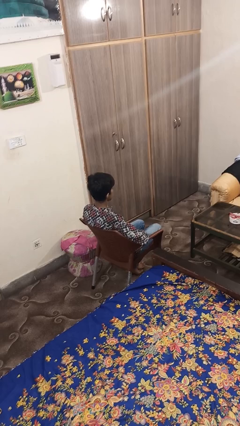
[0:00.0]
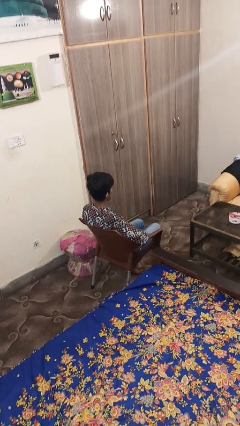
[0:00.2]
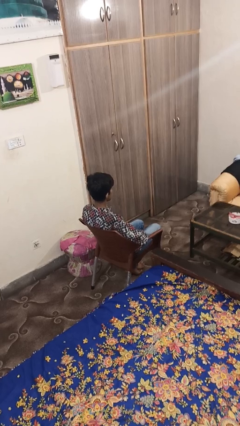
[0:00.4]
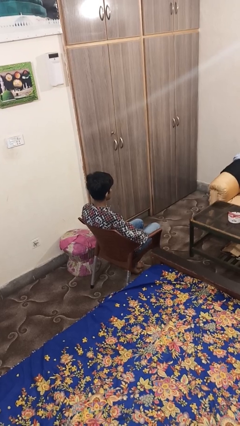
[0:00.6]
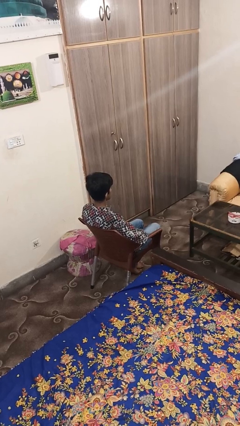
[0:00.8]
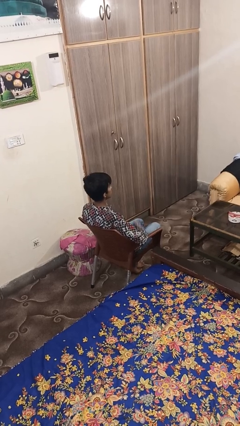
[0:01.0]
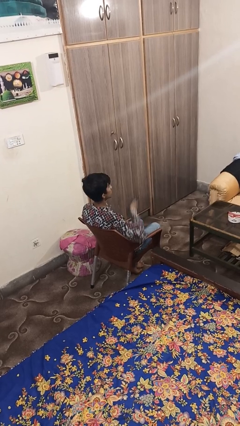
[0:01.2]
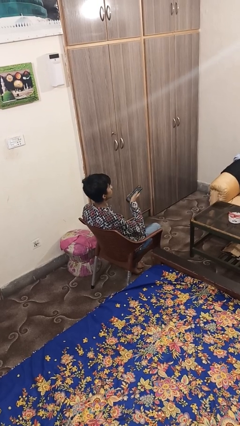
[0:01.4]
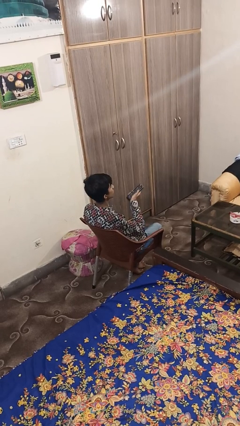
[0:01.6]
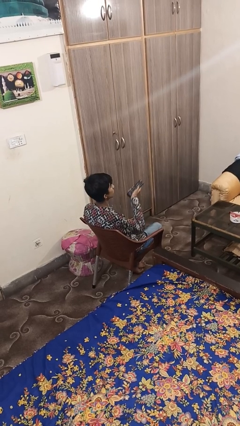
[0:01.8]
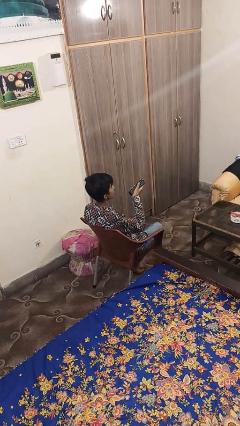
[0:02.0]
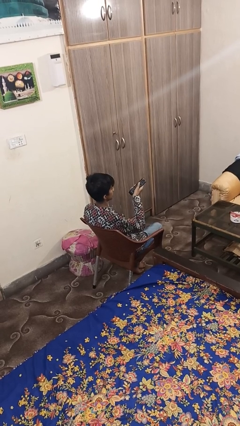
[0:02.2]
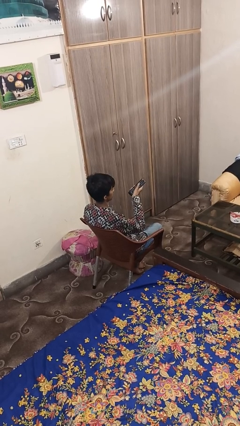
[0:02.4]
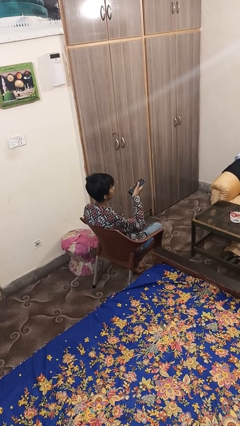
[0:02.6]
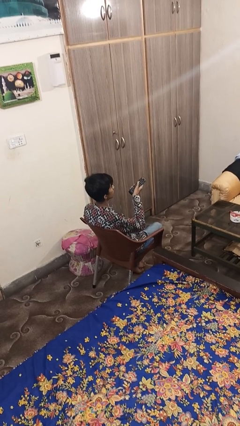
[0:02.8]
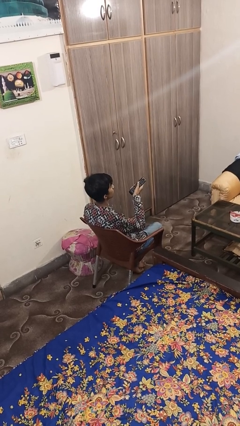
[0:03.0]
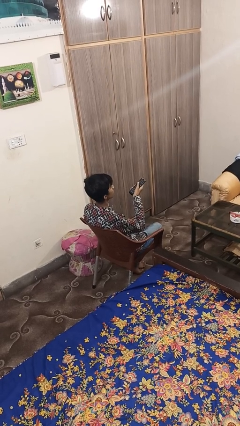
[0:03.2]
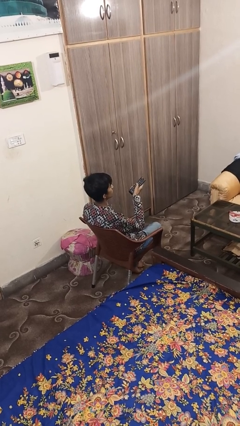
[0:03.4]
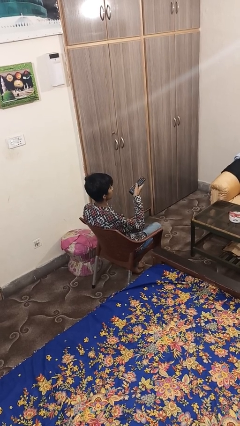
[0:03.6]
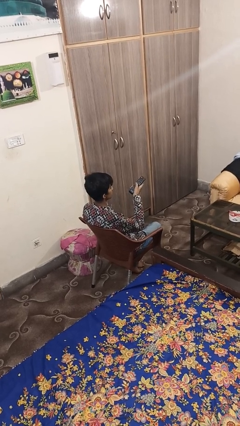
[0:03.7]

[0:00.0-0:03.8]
person uses television remote

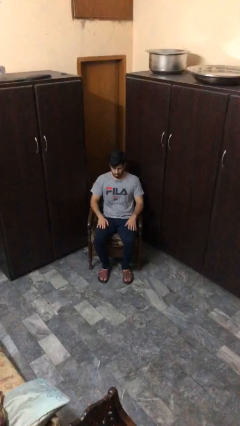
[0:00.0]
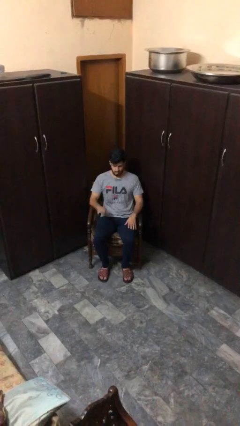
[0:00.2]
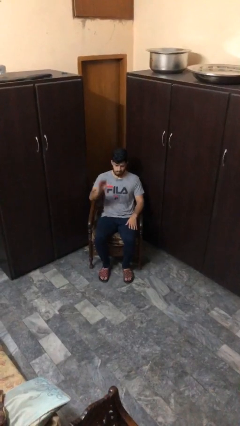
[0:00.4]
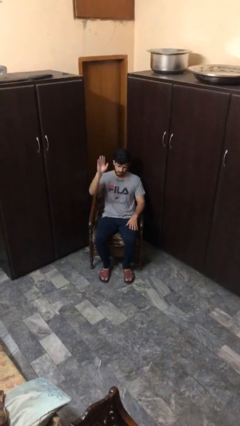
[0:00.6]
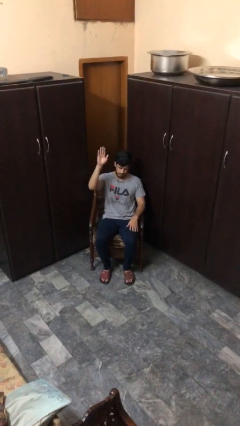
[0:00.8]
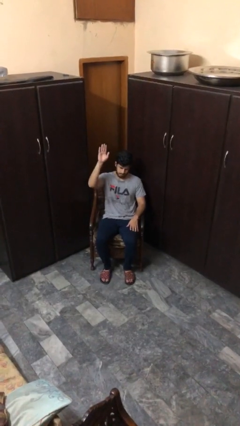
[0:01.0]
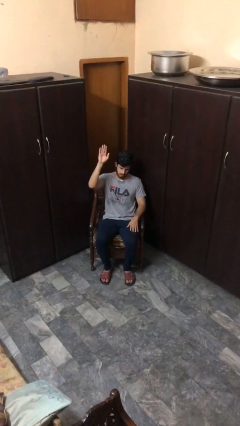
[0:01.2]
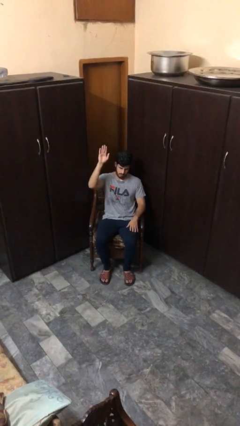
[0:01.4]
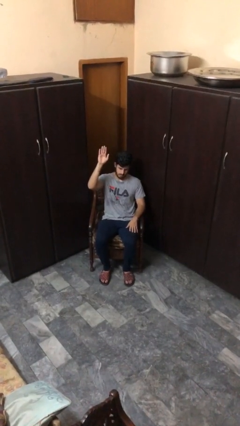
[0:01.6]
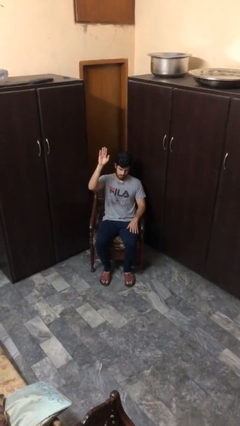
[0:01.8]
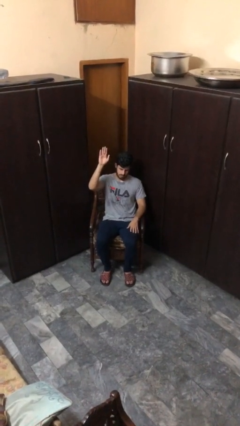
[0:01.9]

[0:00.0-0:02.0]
person gestures raise hand

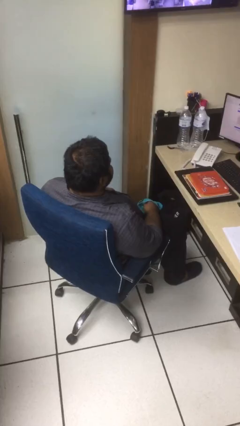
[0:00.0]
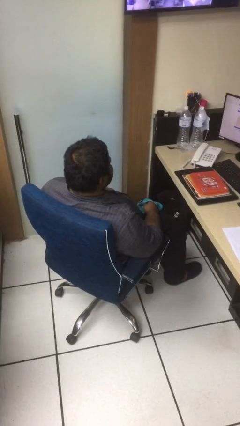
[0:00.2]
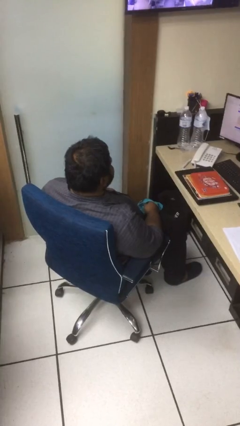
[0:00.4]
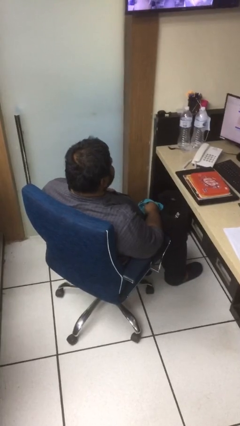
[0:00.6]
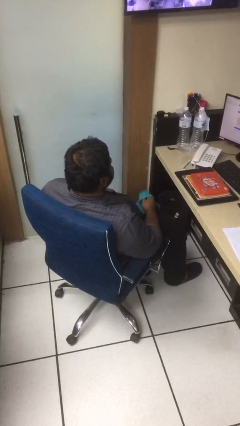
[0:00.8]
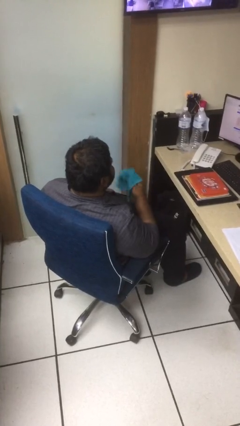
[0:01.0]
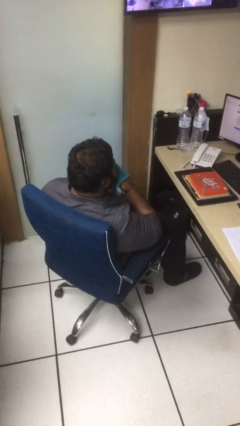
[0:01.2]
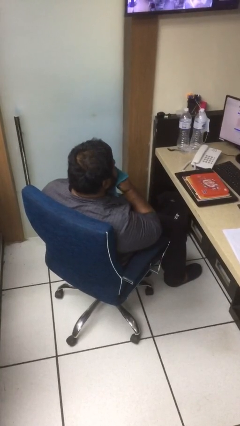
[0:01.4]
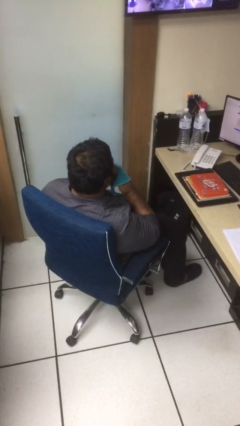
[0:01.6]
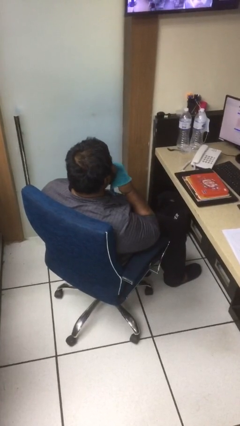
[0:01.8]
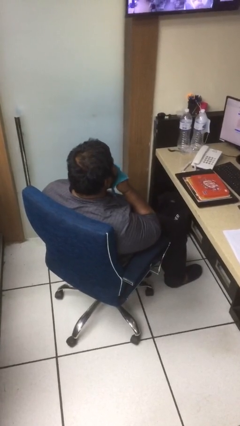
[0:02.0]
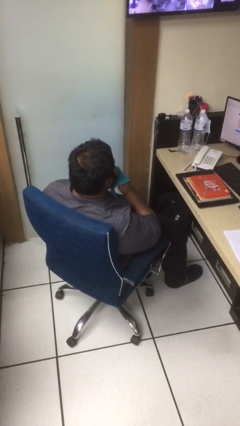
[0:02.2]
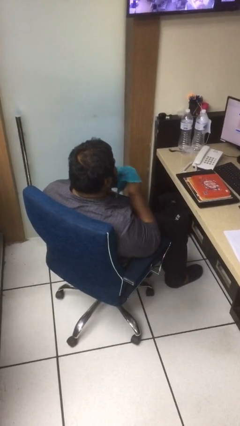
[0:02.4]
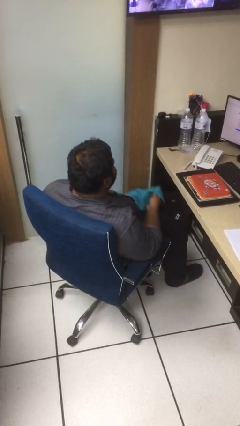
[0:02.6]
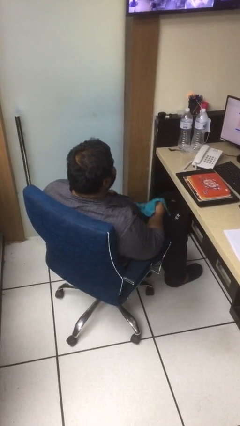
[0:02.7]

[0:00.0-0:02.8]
person wipes mouth with napkin

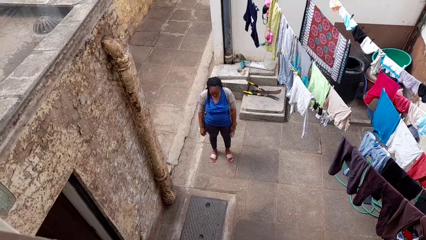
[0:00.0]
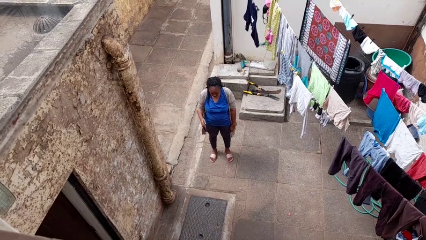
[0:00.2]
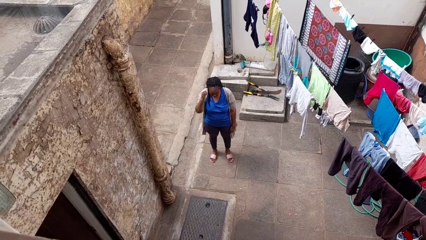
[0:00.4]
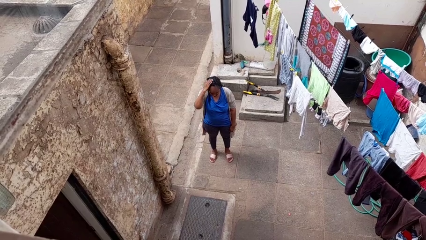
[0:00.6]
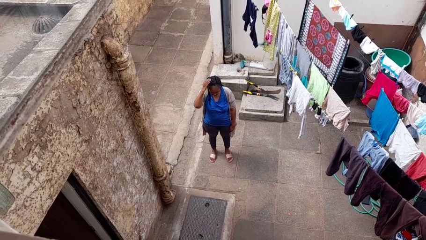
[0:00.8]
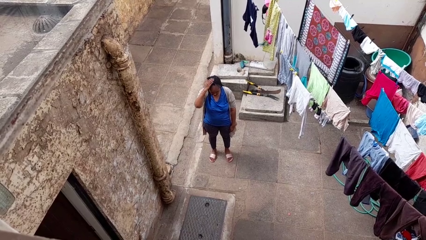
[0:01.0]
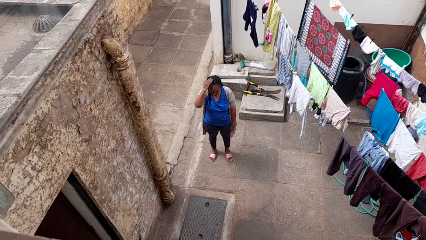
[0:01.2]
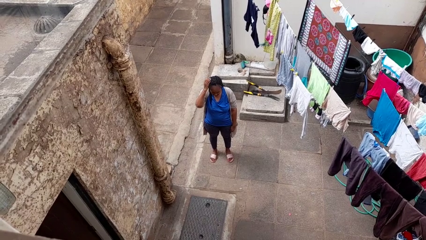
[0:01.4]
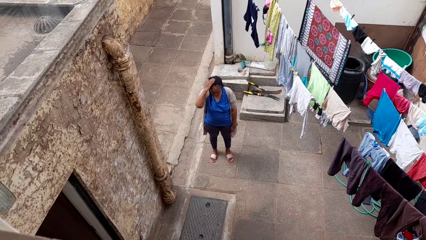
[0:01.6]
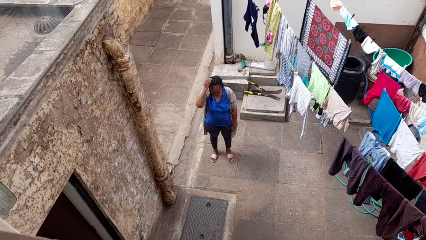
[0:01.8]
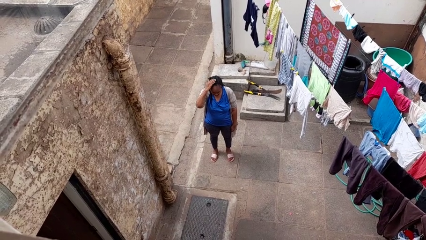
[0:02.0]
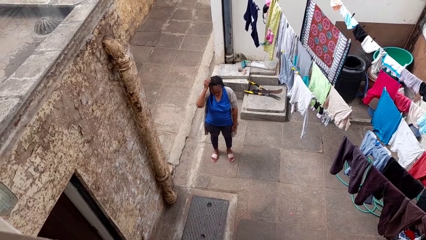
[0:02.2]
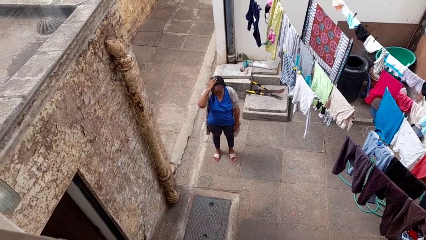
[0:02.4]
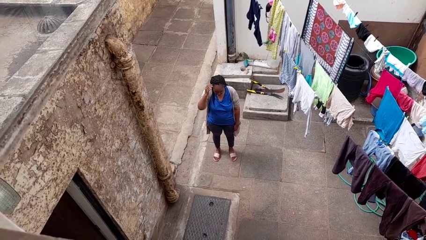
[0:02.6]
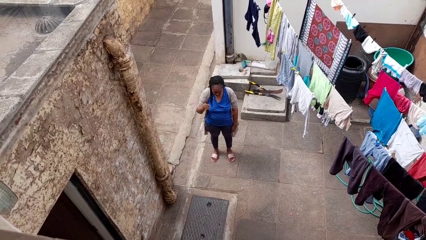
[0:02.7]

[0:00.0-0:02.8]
person pats head

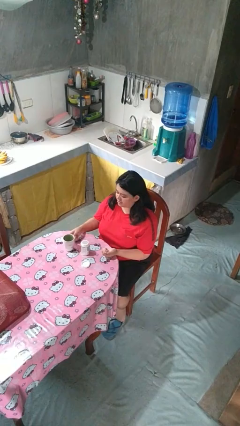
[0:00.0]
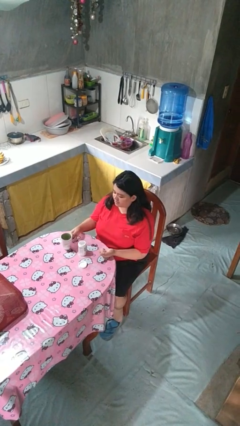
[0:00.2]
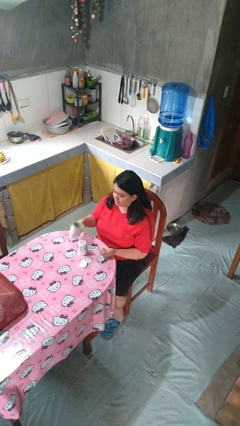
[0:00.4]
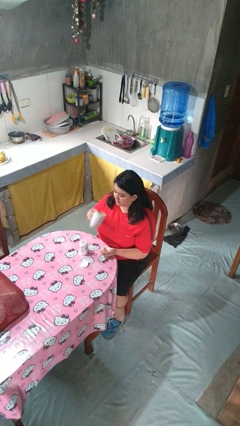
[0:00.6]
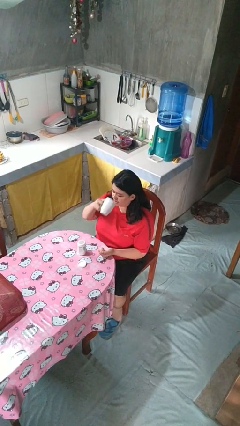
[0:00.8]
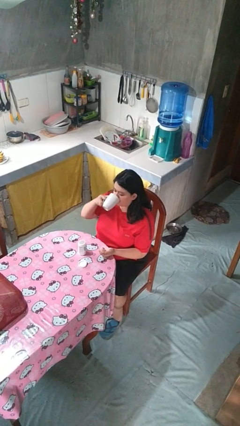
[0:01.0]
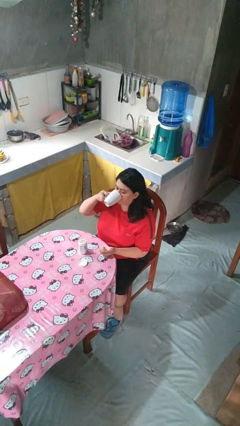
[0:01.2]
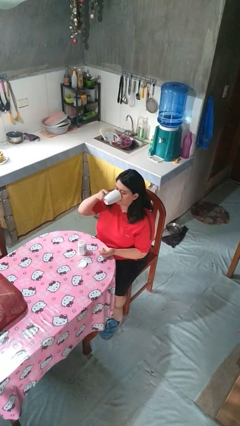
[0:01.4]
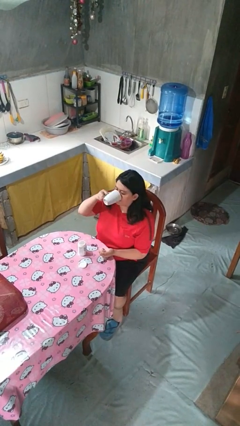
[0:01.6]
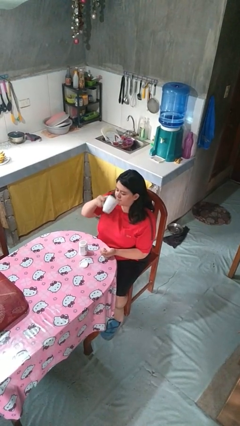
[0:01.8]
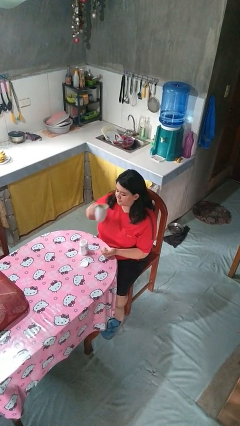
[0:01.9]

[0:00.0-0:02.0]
person drinks from cup

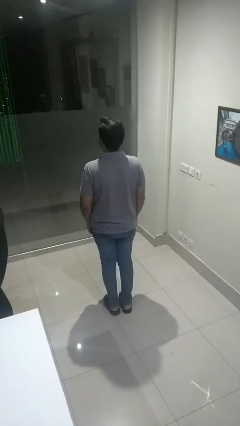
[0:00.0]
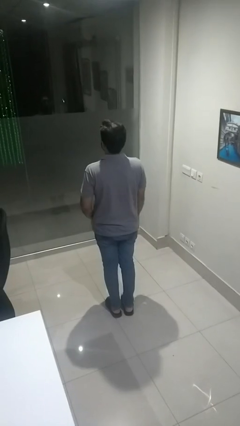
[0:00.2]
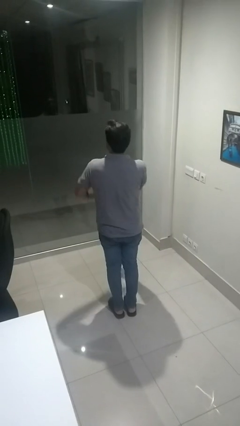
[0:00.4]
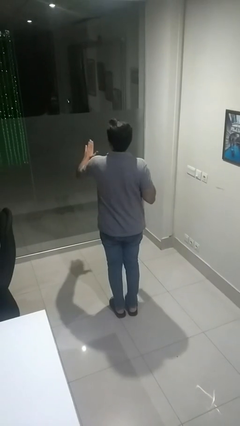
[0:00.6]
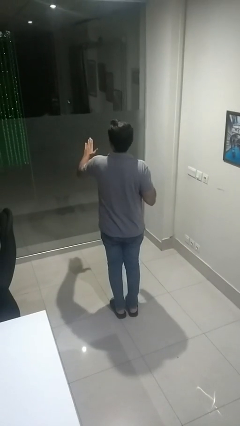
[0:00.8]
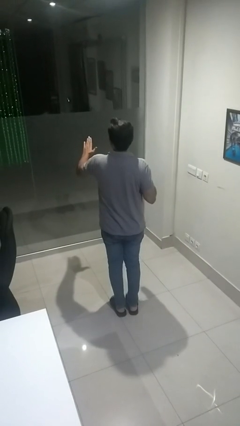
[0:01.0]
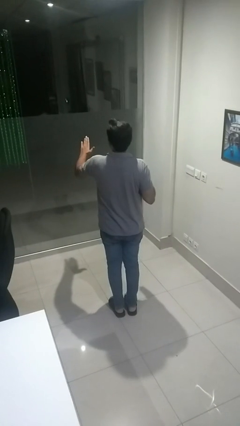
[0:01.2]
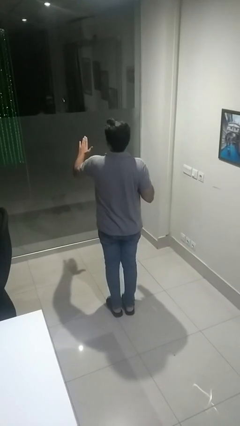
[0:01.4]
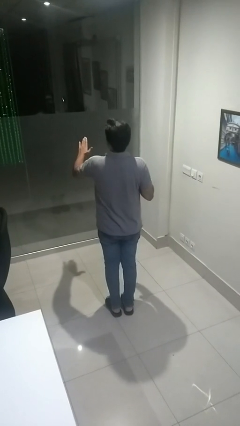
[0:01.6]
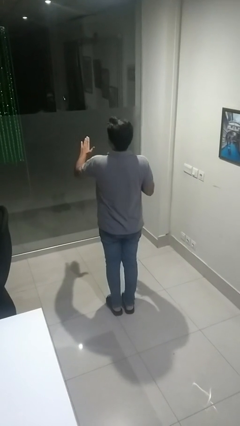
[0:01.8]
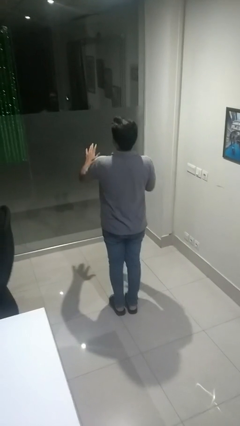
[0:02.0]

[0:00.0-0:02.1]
person karate chop

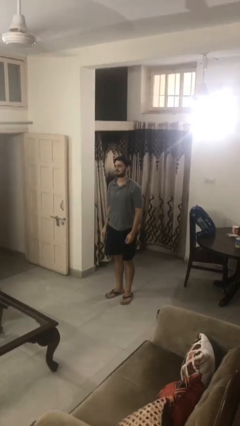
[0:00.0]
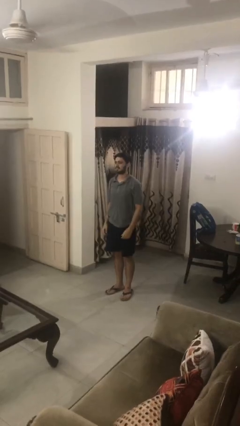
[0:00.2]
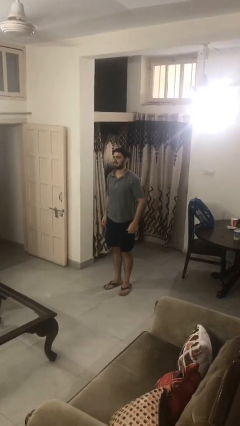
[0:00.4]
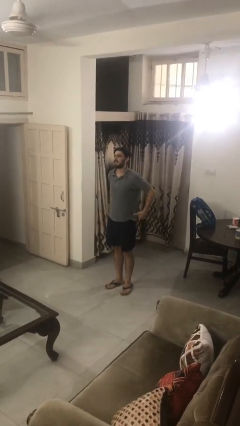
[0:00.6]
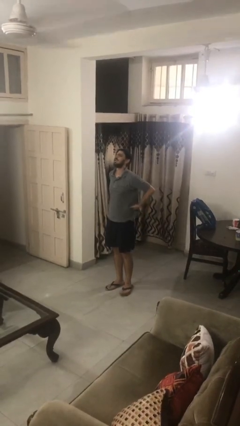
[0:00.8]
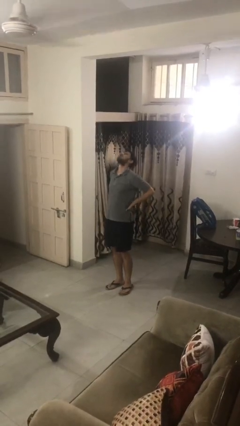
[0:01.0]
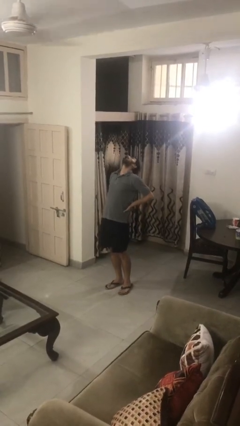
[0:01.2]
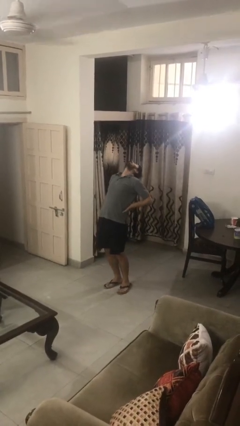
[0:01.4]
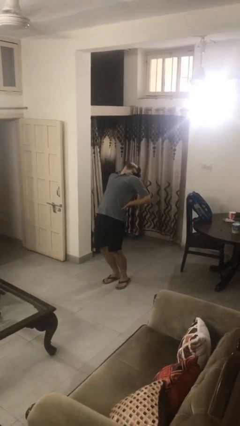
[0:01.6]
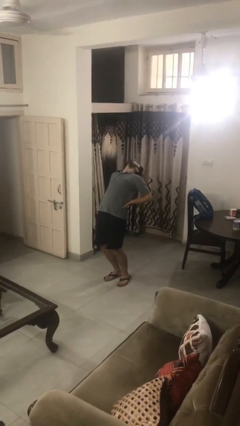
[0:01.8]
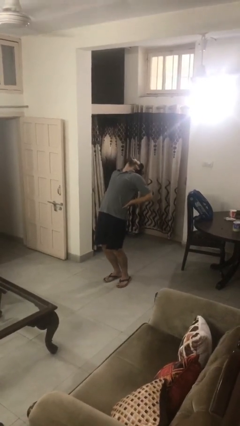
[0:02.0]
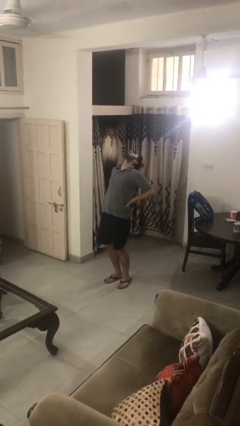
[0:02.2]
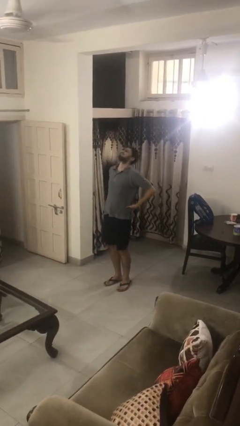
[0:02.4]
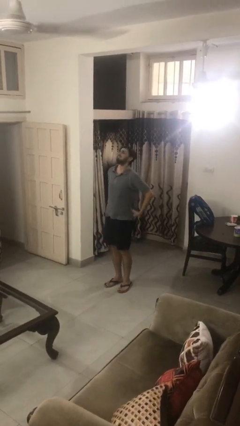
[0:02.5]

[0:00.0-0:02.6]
person stretches back
